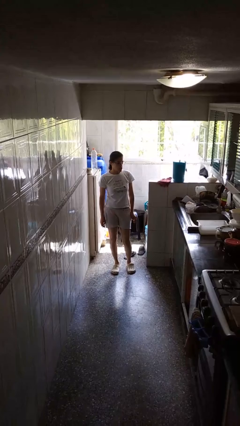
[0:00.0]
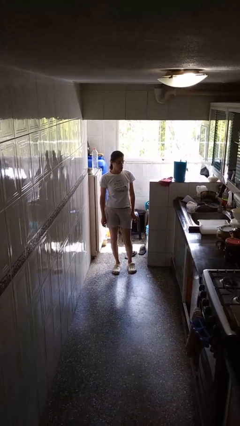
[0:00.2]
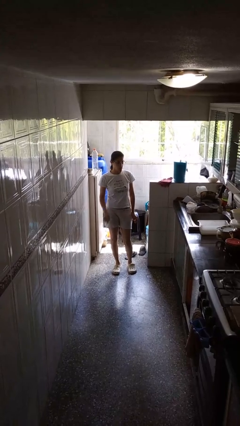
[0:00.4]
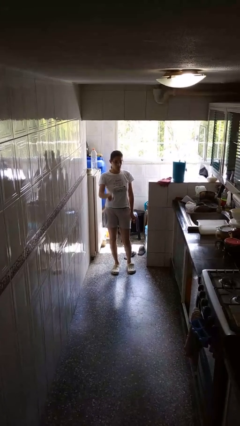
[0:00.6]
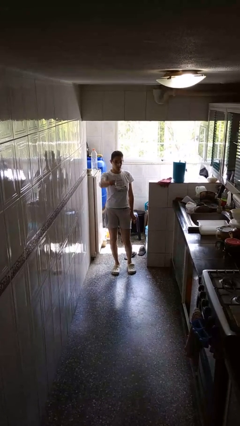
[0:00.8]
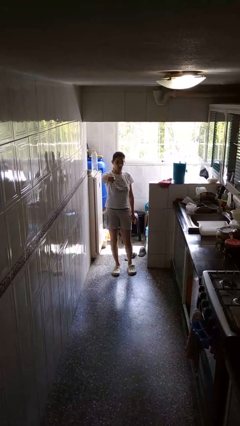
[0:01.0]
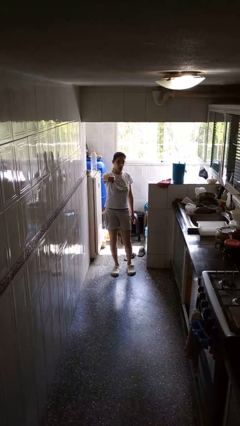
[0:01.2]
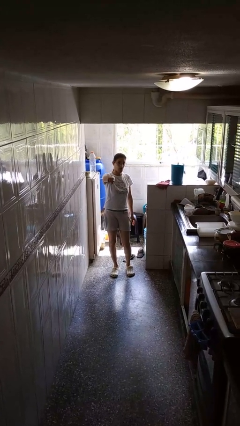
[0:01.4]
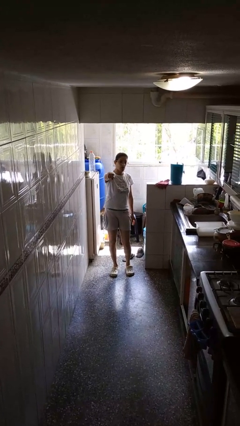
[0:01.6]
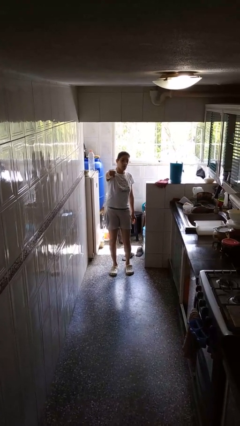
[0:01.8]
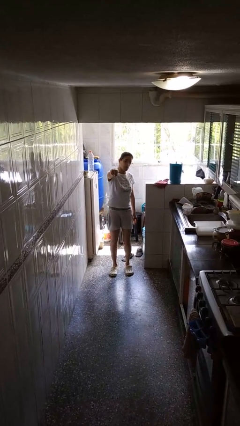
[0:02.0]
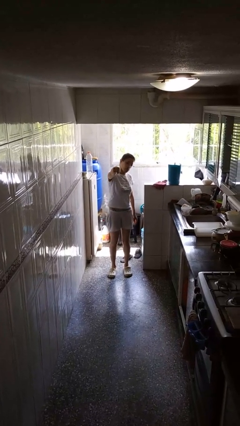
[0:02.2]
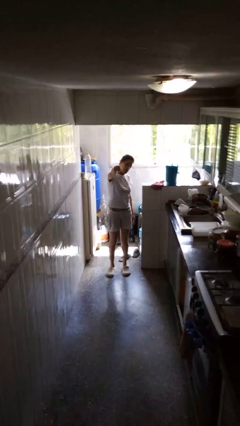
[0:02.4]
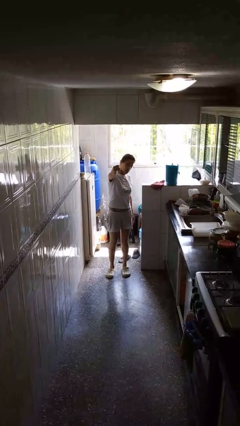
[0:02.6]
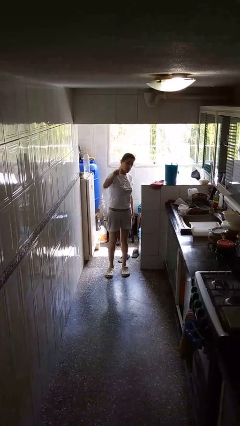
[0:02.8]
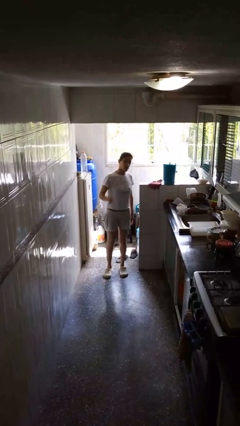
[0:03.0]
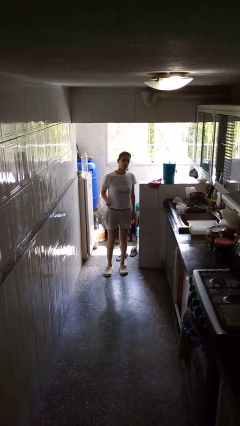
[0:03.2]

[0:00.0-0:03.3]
person points at person

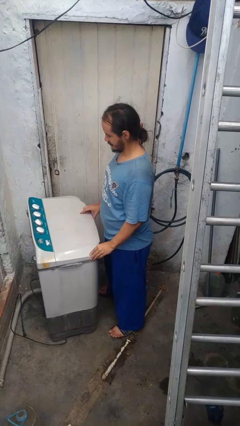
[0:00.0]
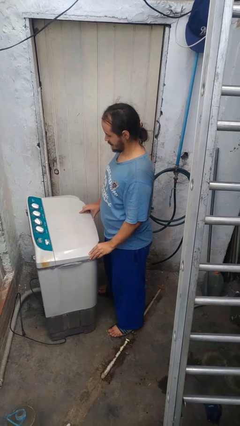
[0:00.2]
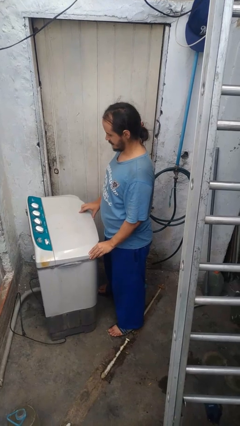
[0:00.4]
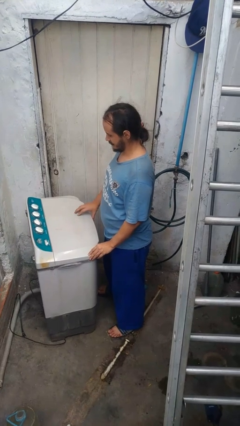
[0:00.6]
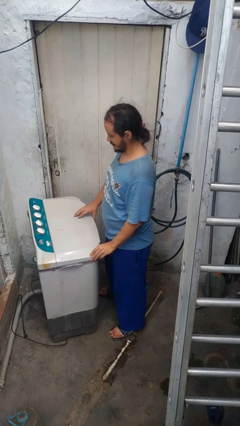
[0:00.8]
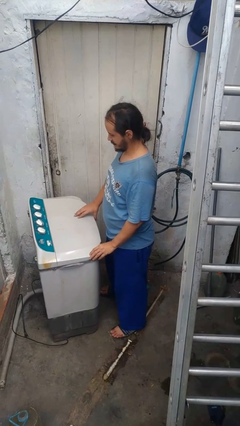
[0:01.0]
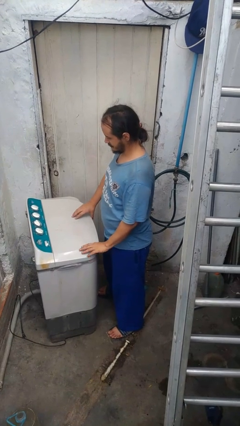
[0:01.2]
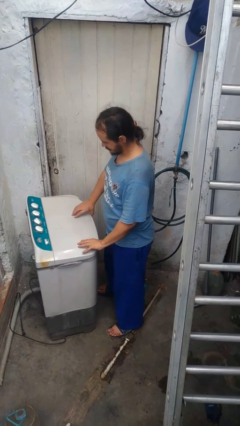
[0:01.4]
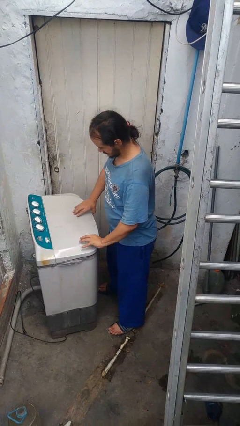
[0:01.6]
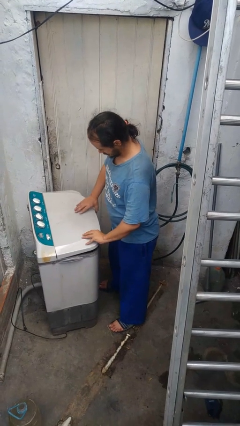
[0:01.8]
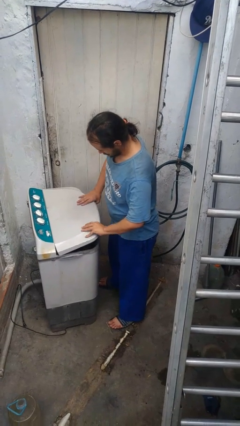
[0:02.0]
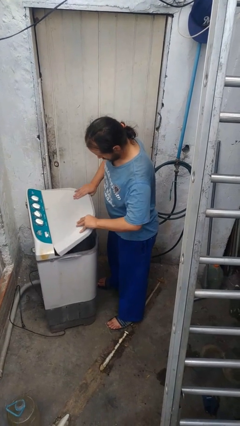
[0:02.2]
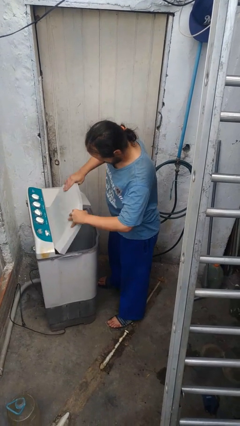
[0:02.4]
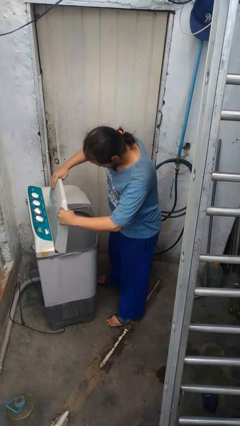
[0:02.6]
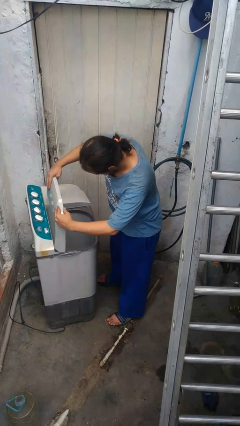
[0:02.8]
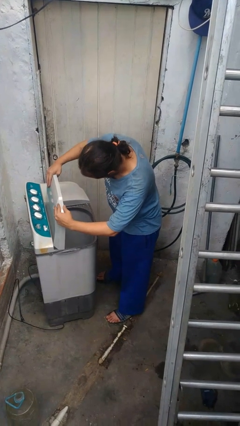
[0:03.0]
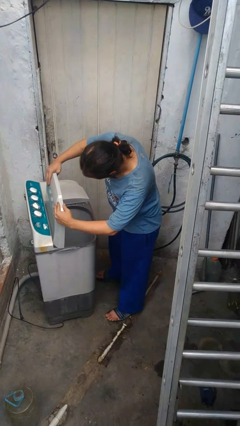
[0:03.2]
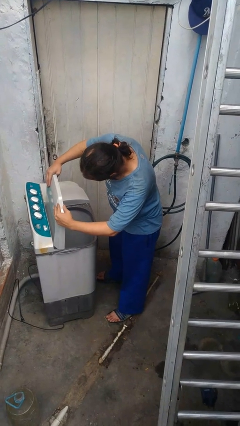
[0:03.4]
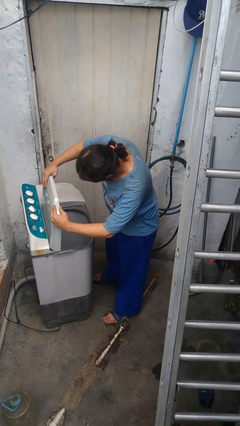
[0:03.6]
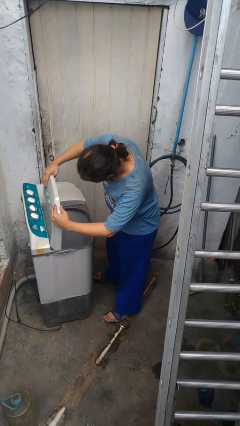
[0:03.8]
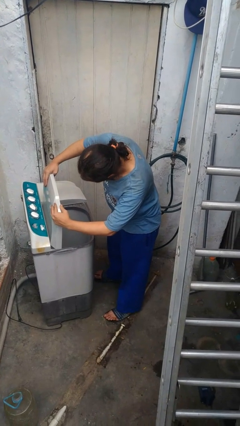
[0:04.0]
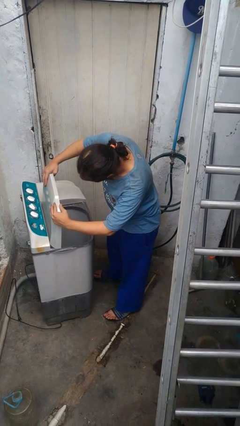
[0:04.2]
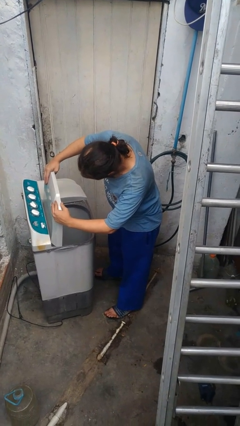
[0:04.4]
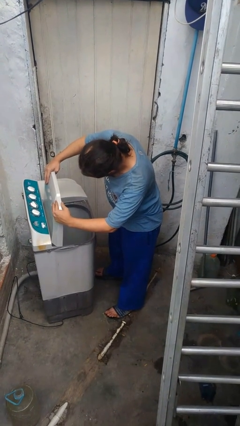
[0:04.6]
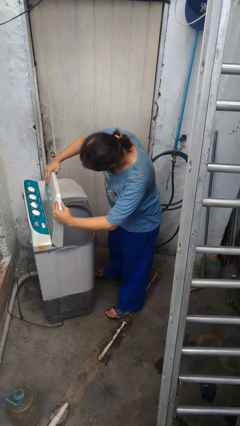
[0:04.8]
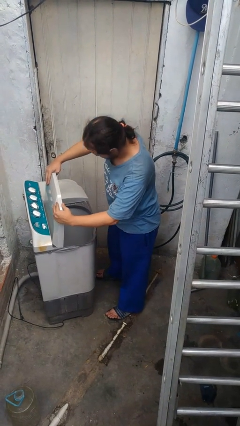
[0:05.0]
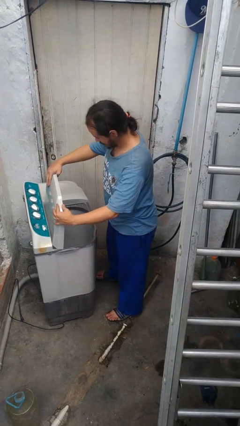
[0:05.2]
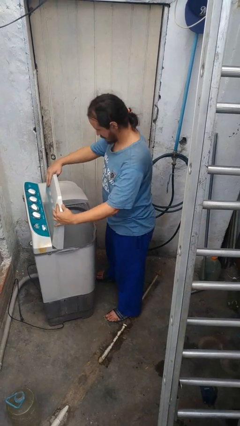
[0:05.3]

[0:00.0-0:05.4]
person opens clothes washer

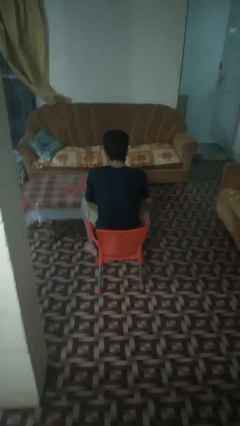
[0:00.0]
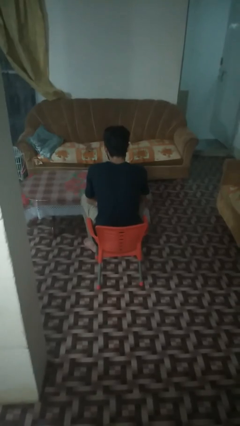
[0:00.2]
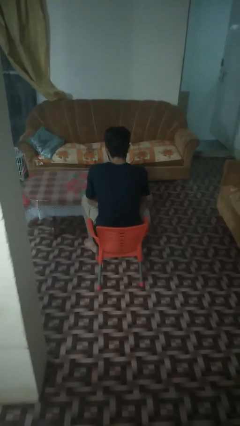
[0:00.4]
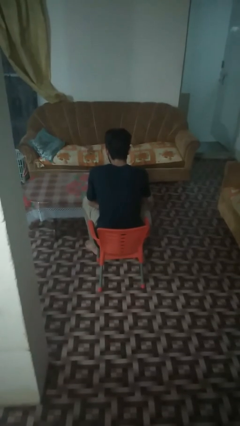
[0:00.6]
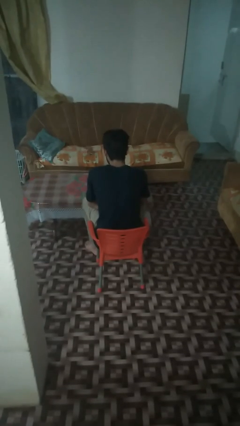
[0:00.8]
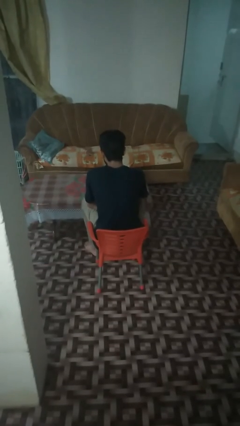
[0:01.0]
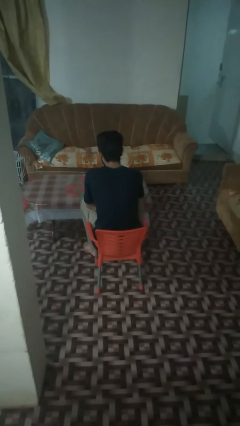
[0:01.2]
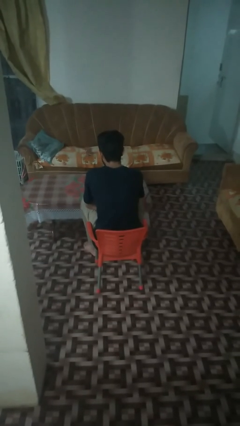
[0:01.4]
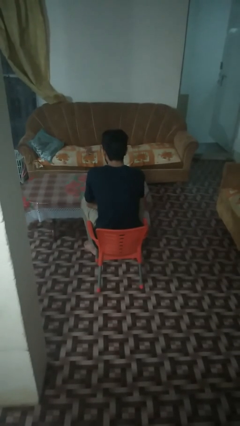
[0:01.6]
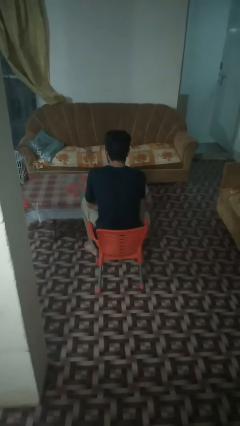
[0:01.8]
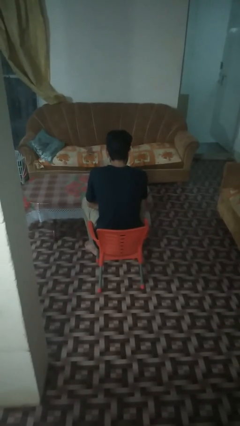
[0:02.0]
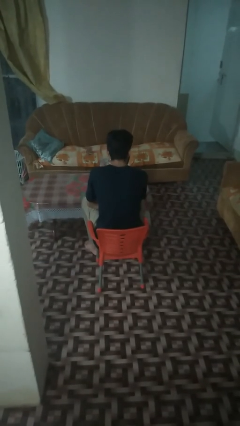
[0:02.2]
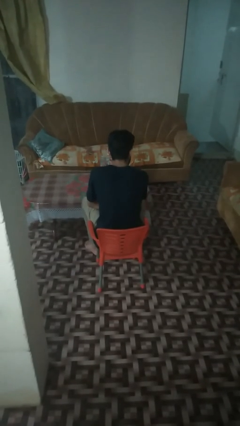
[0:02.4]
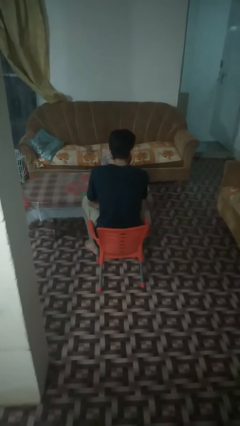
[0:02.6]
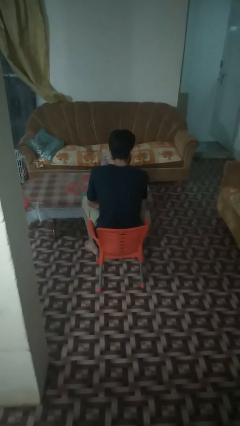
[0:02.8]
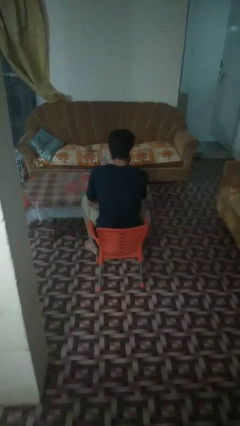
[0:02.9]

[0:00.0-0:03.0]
person picks up object from table

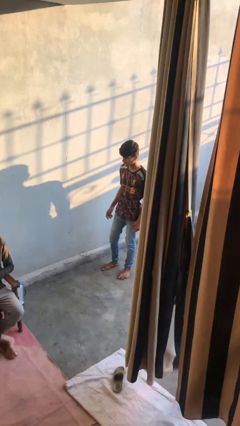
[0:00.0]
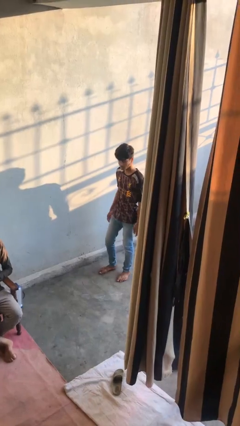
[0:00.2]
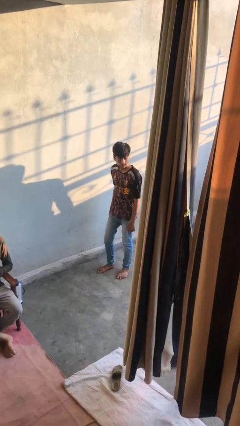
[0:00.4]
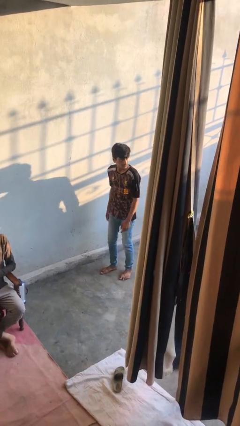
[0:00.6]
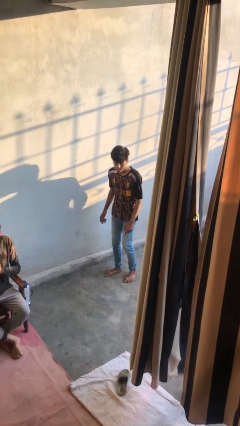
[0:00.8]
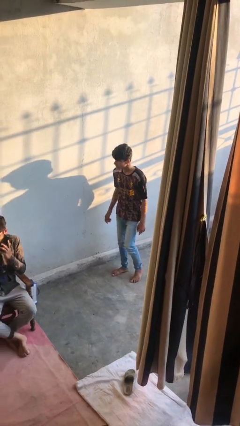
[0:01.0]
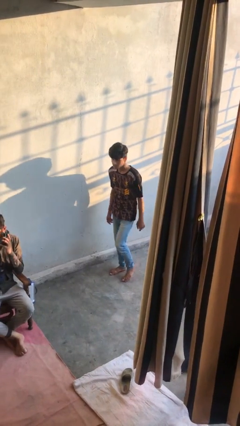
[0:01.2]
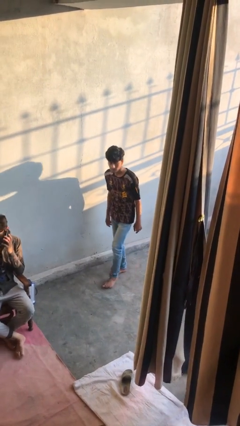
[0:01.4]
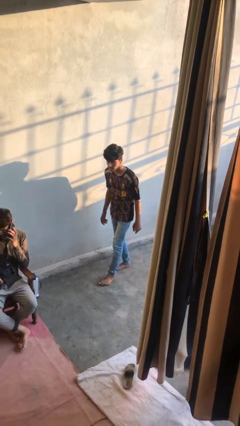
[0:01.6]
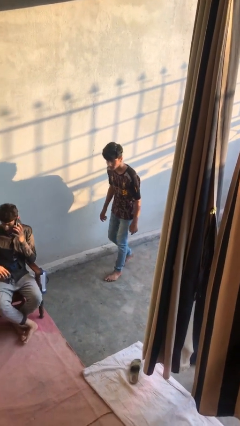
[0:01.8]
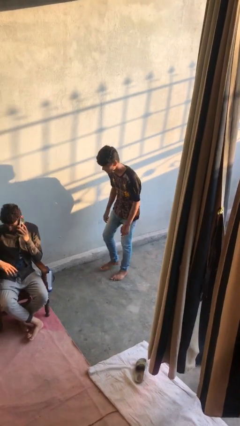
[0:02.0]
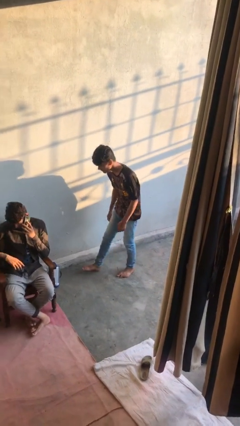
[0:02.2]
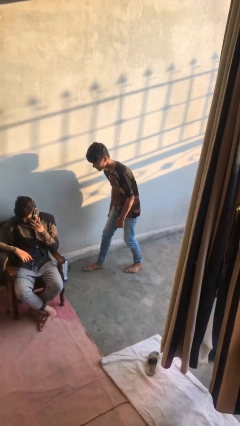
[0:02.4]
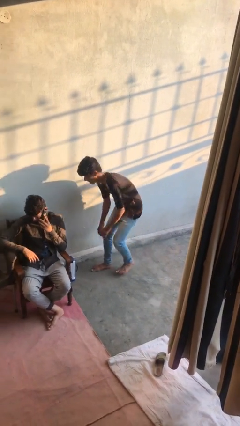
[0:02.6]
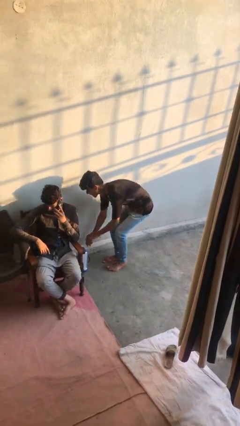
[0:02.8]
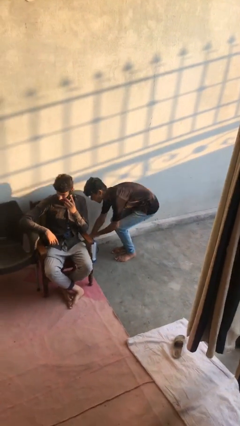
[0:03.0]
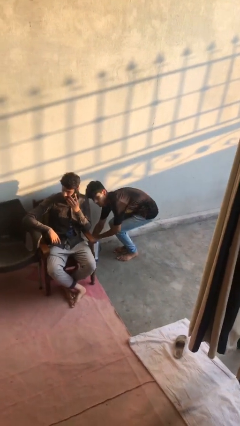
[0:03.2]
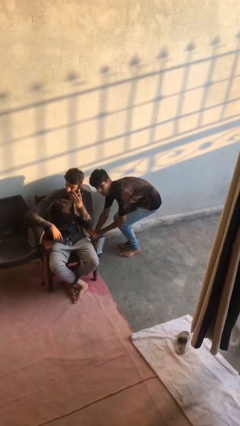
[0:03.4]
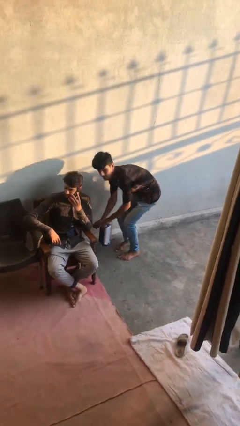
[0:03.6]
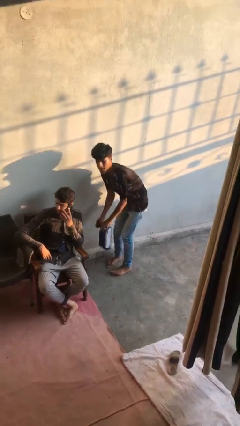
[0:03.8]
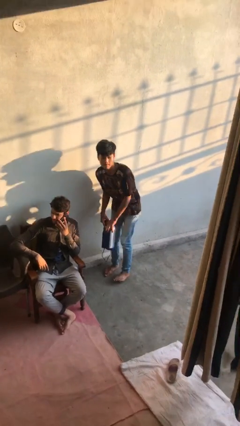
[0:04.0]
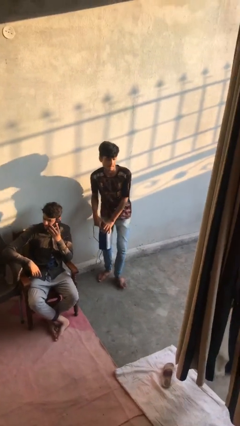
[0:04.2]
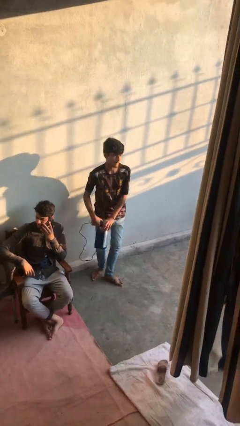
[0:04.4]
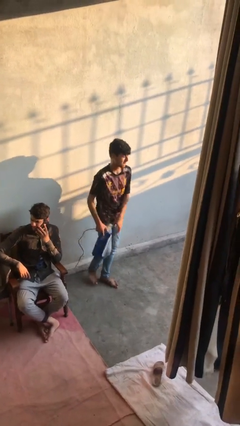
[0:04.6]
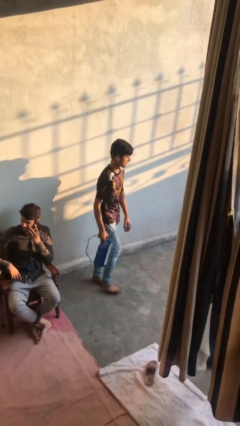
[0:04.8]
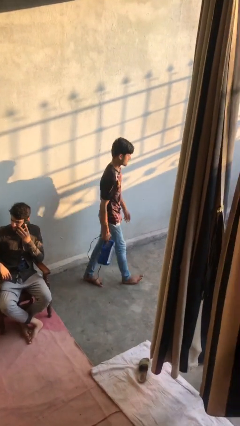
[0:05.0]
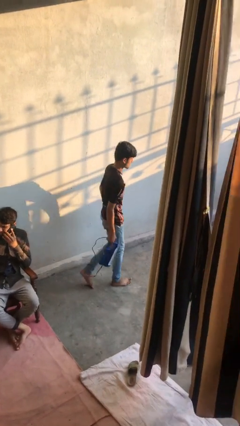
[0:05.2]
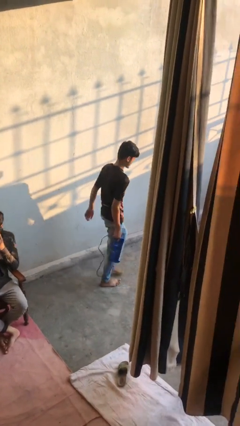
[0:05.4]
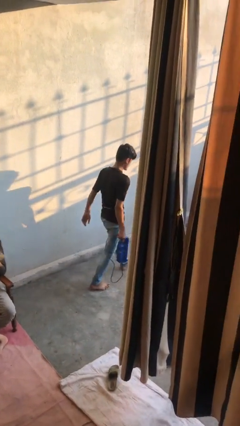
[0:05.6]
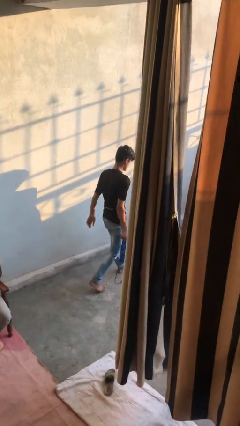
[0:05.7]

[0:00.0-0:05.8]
person steals object from person

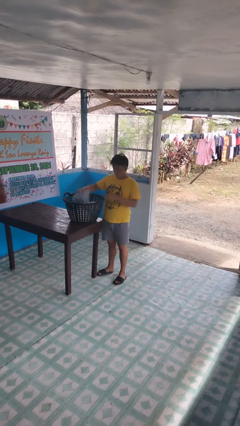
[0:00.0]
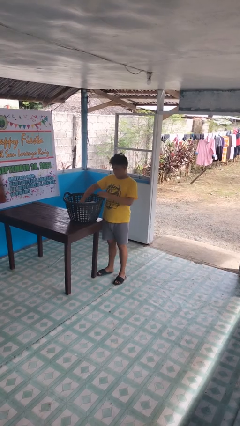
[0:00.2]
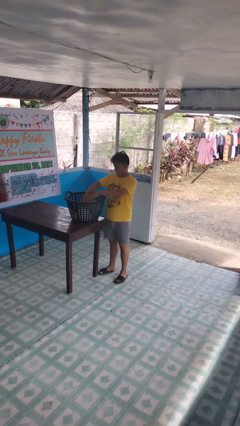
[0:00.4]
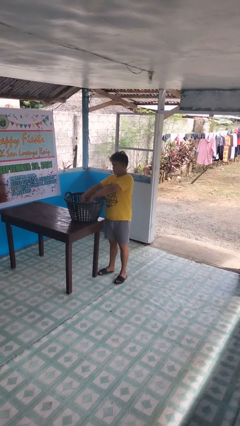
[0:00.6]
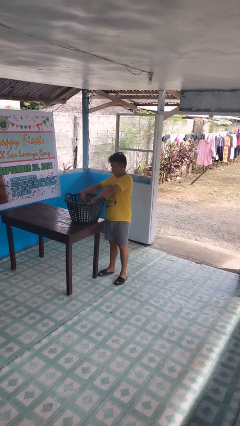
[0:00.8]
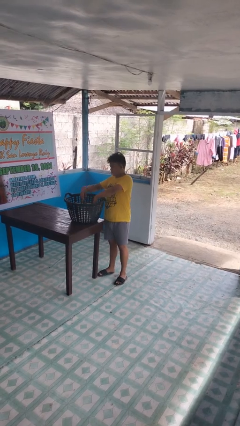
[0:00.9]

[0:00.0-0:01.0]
person puts object into basket
